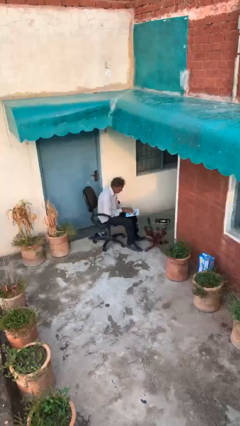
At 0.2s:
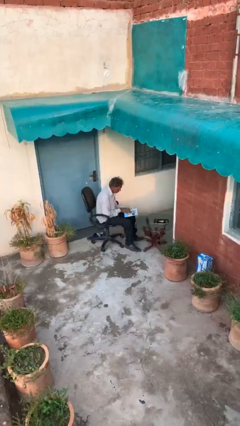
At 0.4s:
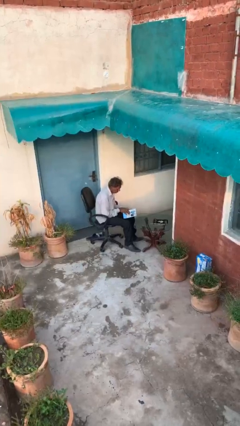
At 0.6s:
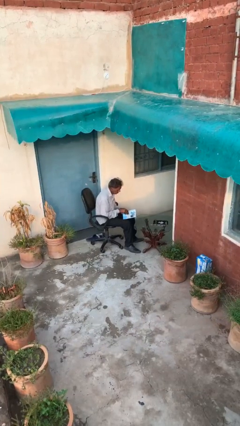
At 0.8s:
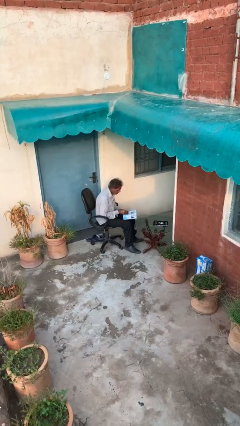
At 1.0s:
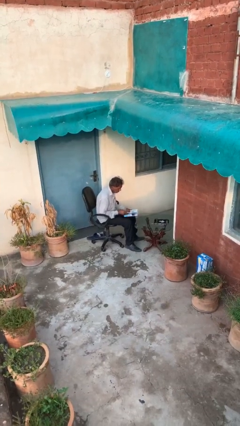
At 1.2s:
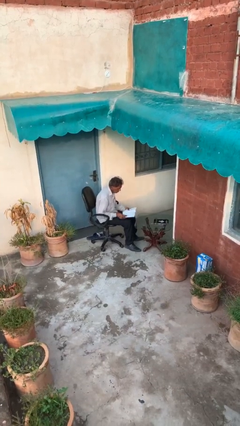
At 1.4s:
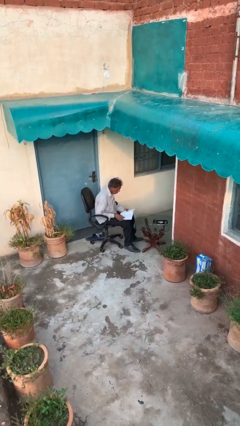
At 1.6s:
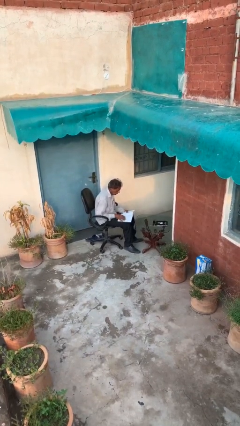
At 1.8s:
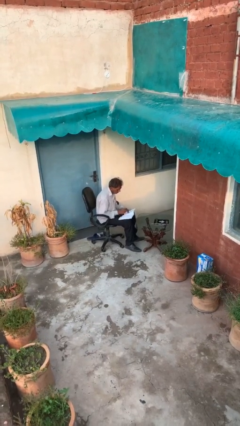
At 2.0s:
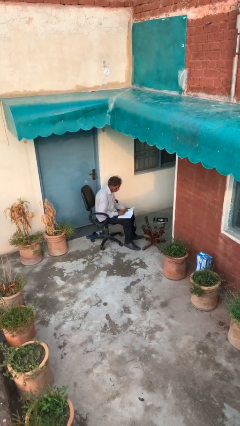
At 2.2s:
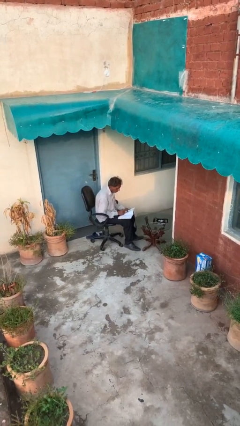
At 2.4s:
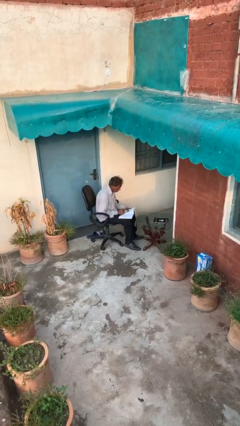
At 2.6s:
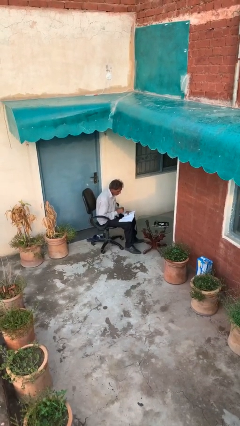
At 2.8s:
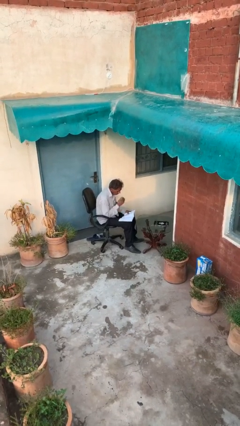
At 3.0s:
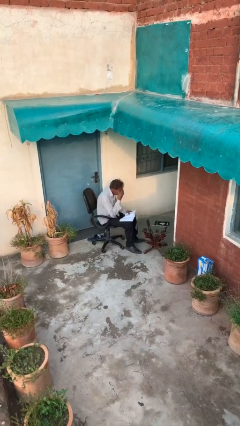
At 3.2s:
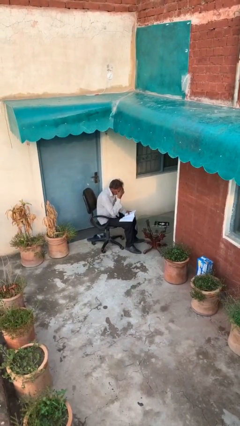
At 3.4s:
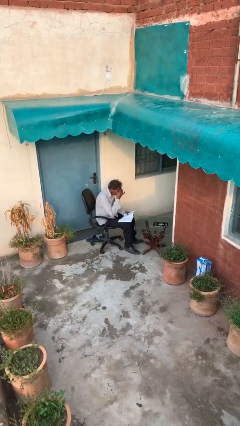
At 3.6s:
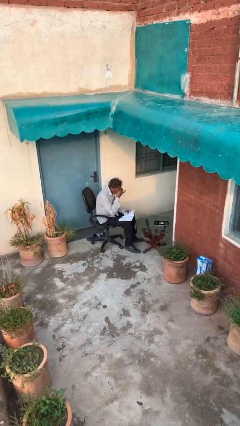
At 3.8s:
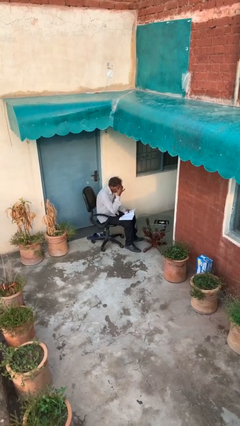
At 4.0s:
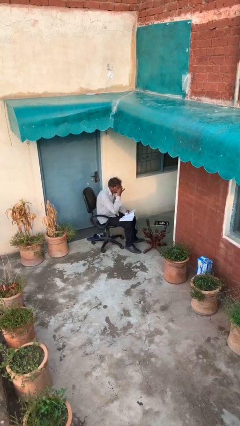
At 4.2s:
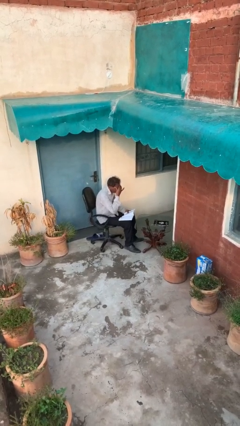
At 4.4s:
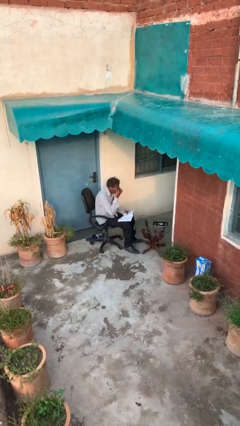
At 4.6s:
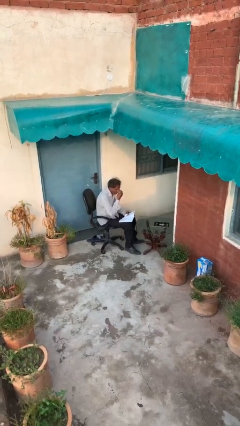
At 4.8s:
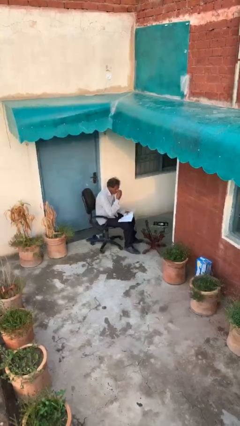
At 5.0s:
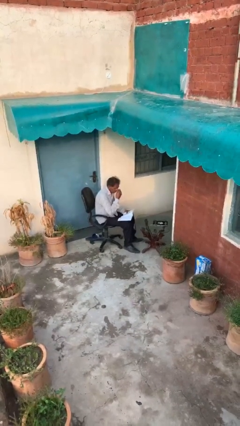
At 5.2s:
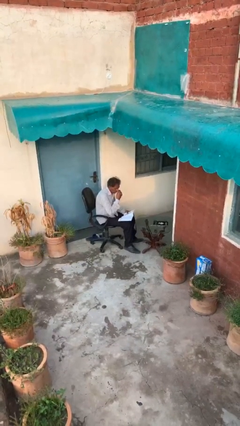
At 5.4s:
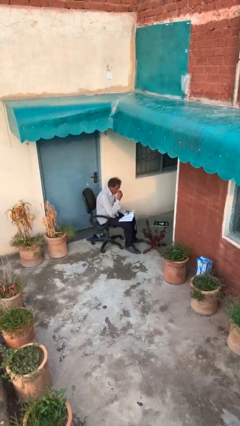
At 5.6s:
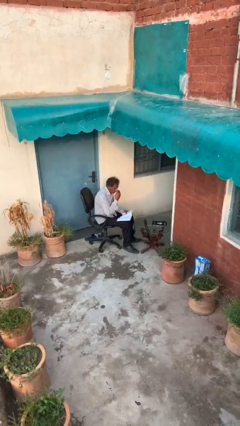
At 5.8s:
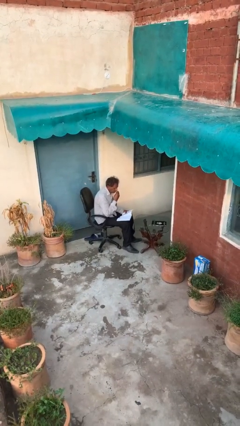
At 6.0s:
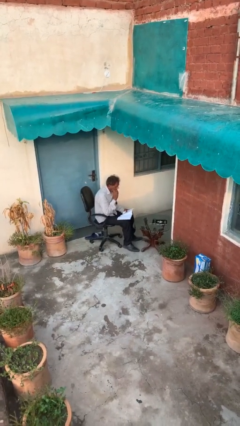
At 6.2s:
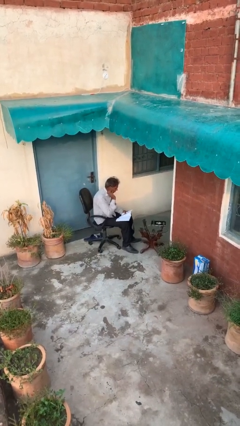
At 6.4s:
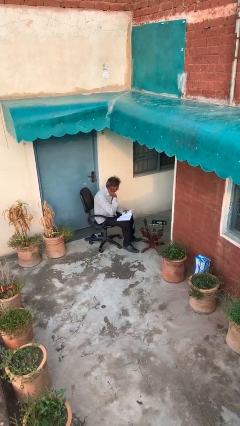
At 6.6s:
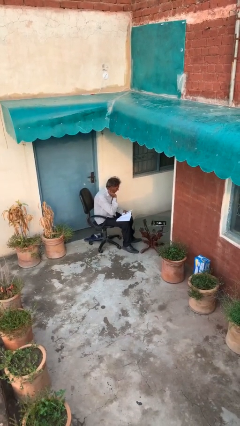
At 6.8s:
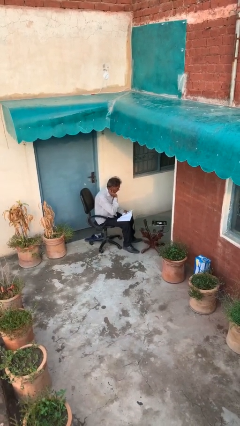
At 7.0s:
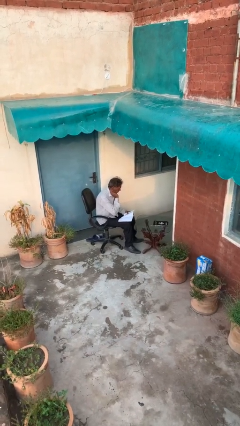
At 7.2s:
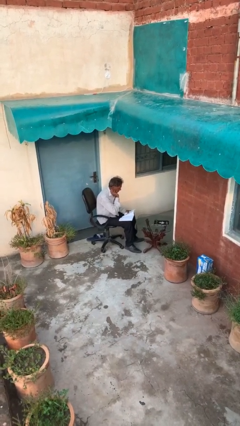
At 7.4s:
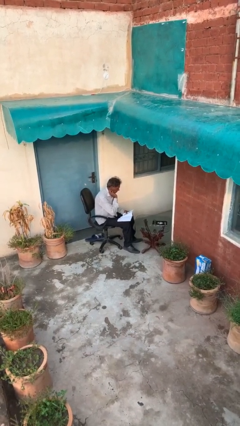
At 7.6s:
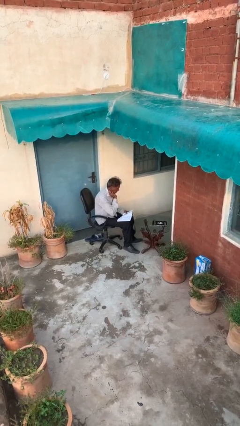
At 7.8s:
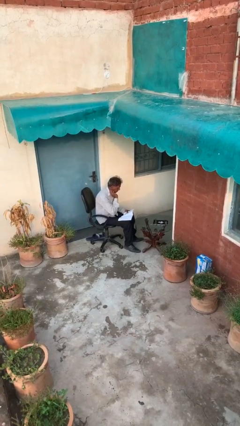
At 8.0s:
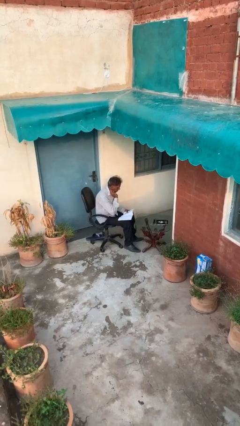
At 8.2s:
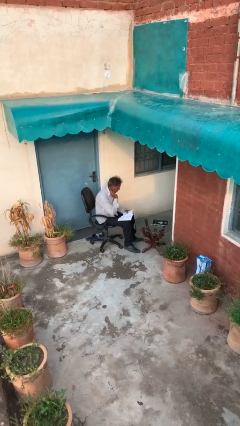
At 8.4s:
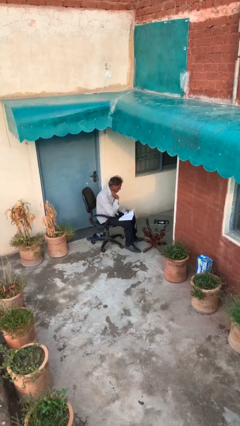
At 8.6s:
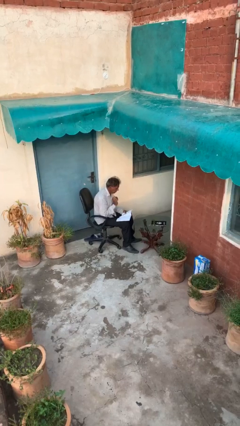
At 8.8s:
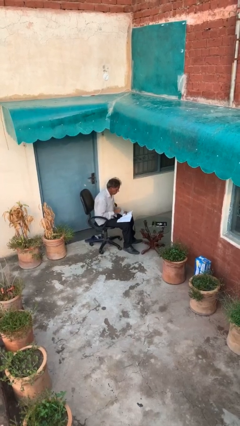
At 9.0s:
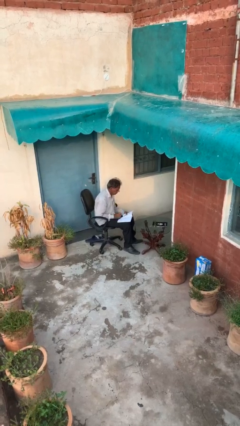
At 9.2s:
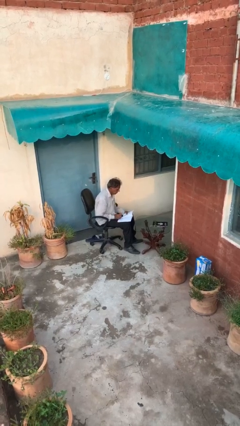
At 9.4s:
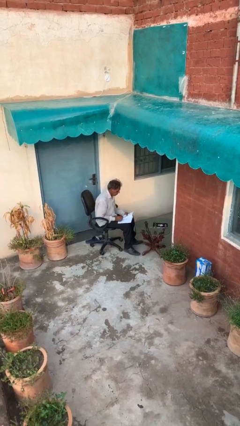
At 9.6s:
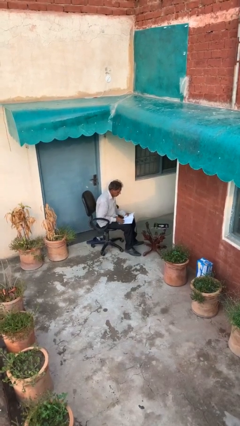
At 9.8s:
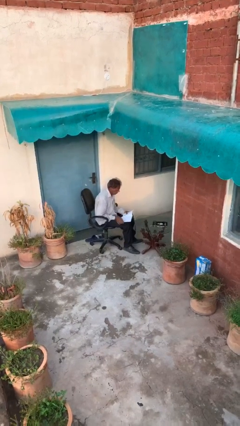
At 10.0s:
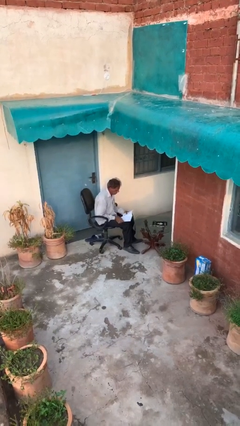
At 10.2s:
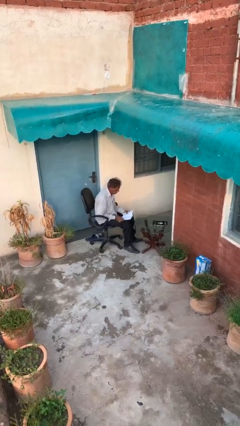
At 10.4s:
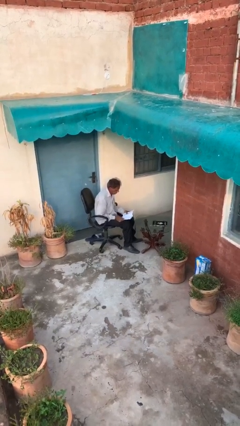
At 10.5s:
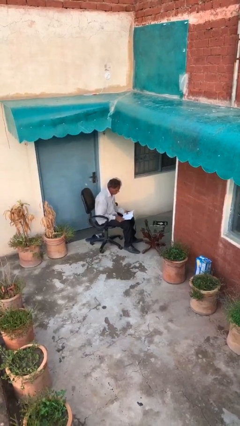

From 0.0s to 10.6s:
person reads document

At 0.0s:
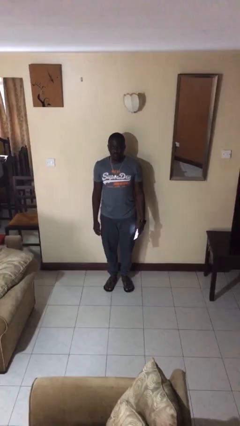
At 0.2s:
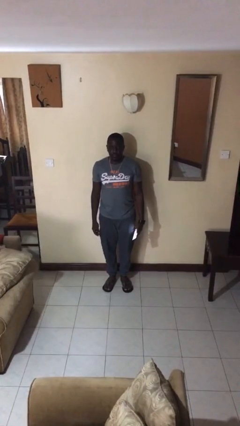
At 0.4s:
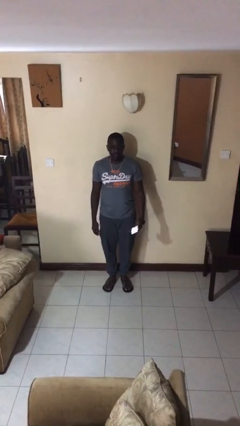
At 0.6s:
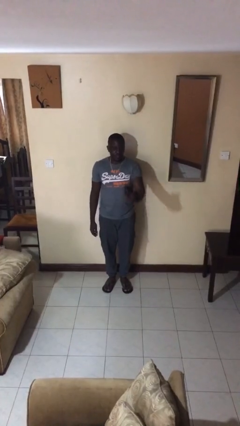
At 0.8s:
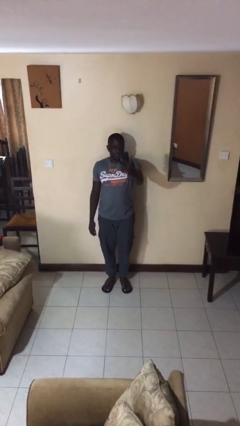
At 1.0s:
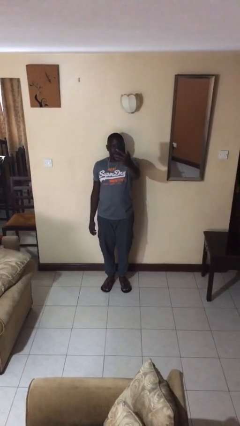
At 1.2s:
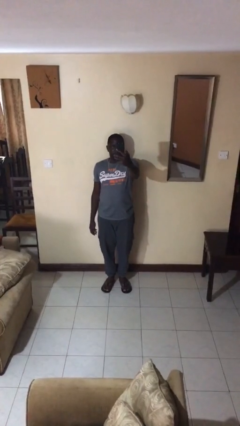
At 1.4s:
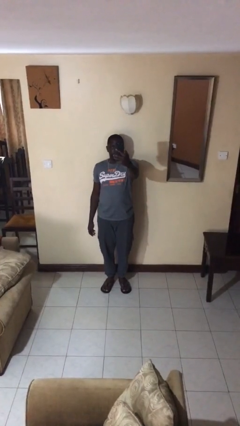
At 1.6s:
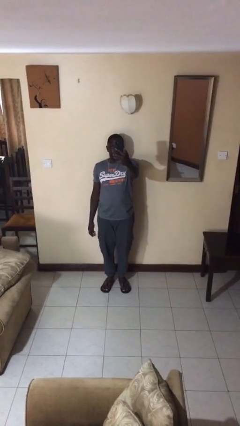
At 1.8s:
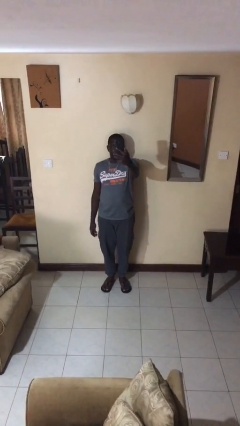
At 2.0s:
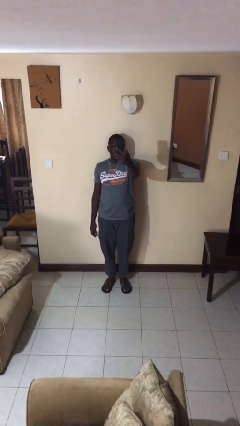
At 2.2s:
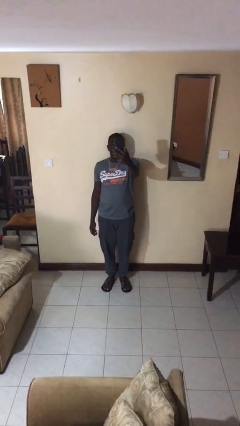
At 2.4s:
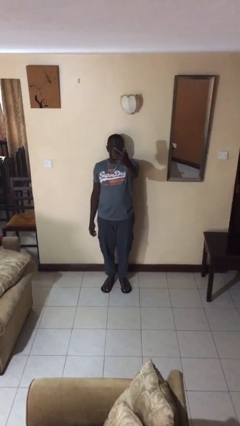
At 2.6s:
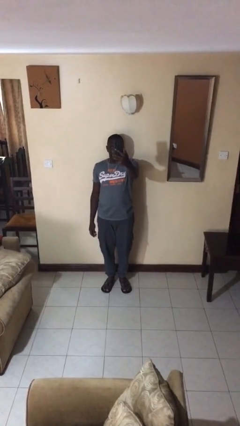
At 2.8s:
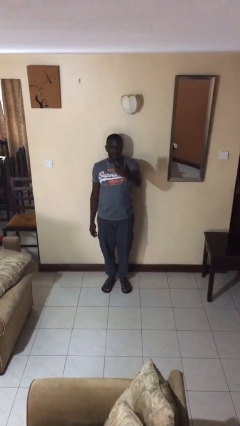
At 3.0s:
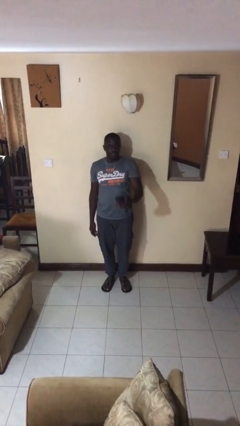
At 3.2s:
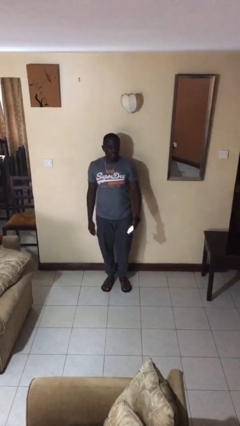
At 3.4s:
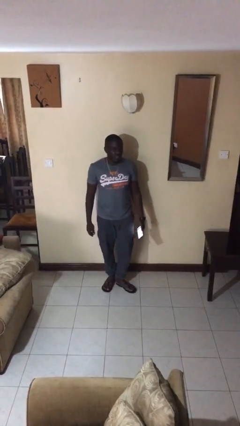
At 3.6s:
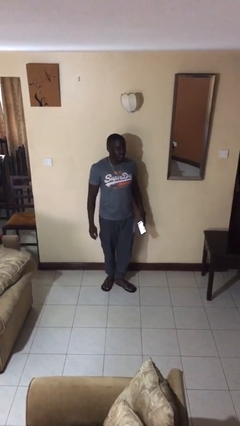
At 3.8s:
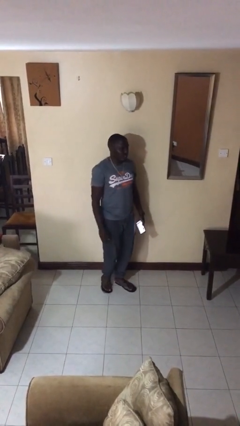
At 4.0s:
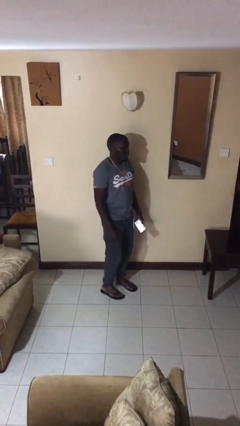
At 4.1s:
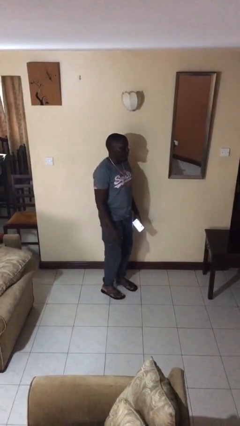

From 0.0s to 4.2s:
person takes selfie

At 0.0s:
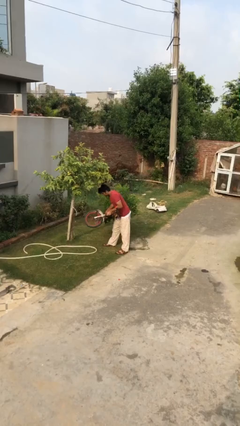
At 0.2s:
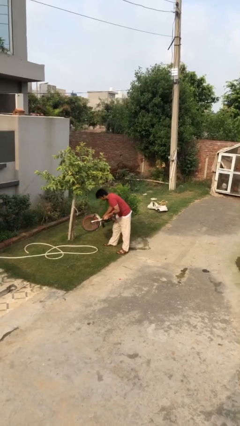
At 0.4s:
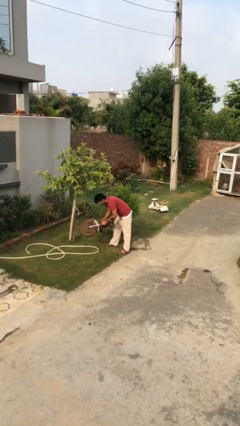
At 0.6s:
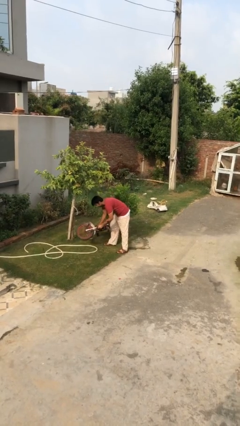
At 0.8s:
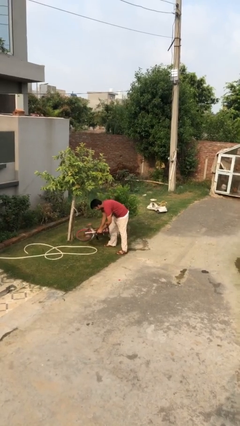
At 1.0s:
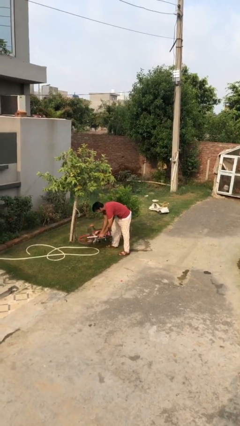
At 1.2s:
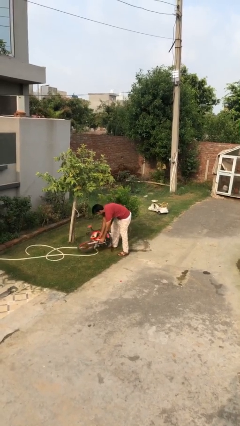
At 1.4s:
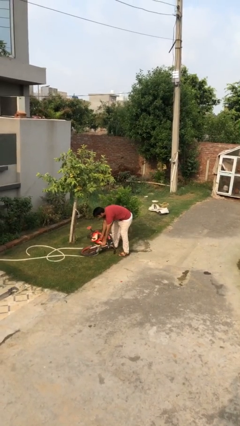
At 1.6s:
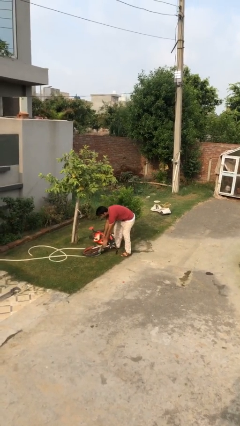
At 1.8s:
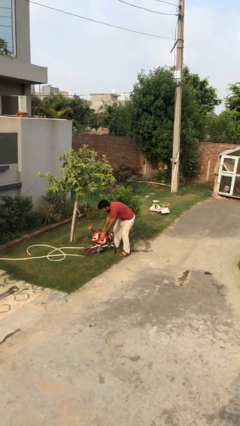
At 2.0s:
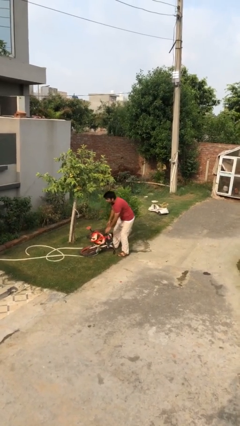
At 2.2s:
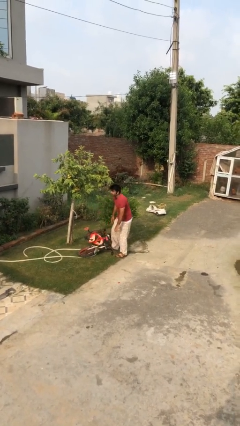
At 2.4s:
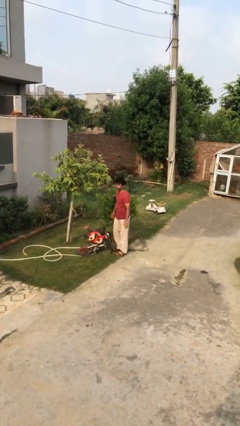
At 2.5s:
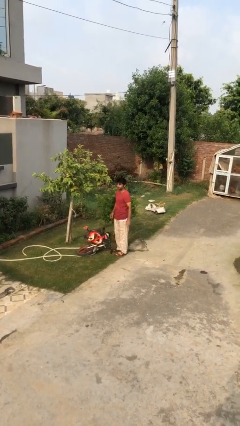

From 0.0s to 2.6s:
person puts down object on floor

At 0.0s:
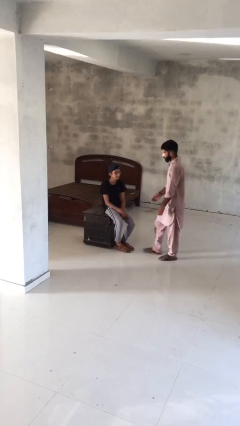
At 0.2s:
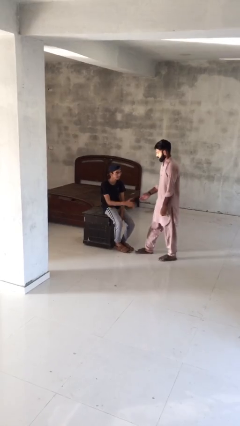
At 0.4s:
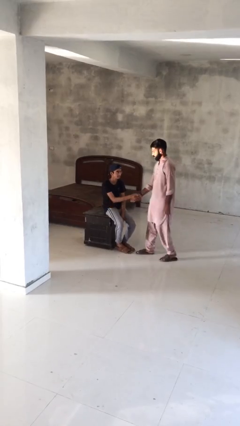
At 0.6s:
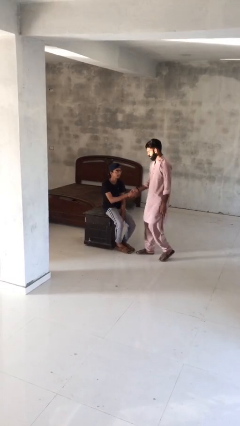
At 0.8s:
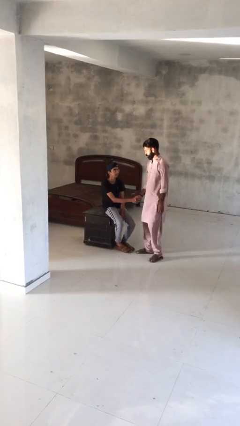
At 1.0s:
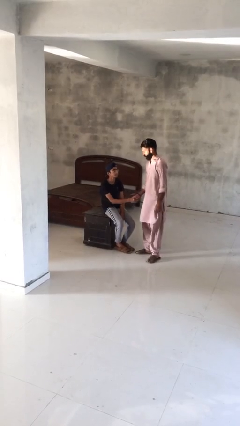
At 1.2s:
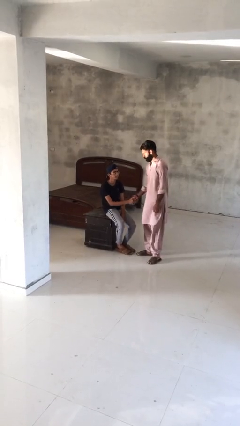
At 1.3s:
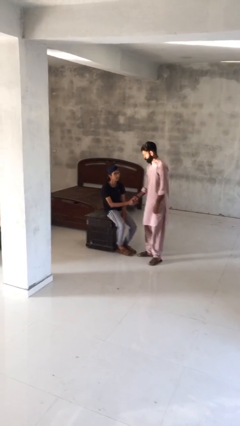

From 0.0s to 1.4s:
person shakes hand
